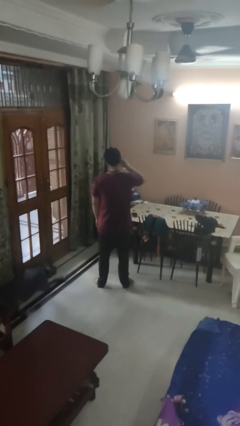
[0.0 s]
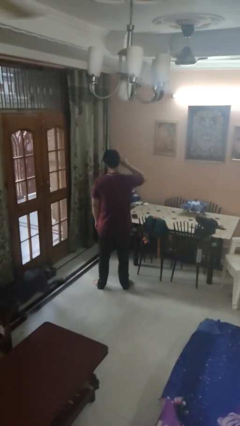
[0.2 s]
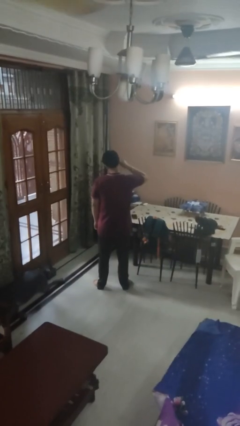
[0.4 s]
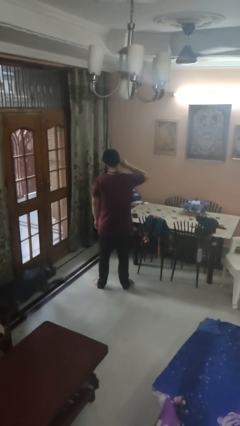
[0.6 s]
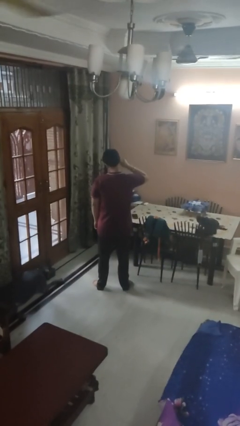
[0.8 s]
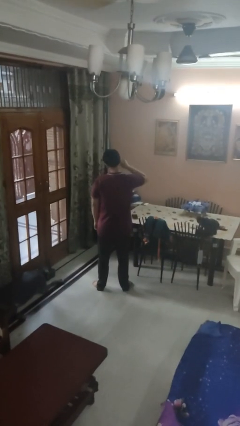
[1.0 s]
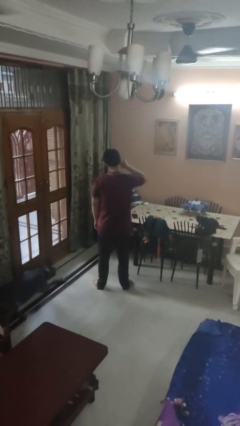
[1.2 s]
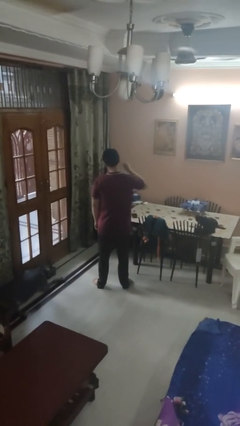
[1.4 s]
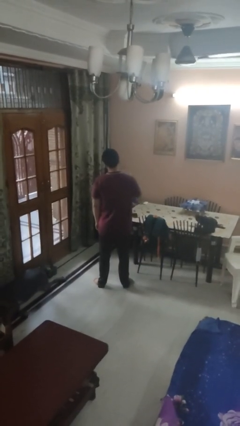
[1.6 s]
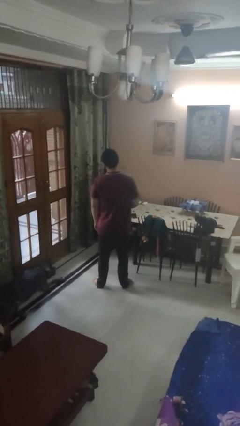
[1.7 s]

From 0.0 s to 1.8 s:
person touches earlobe

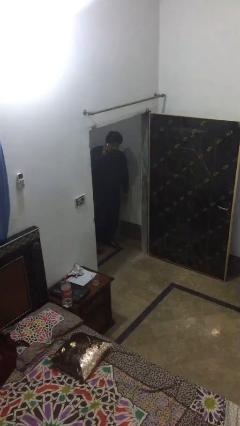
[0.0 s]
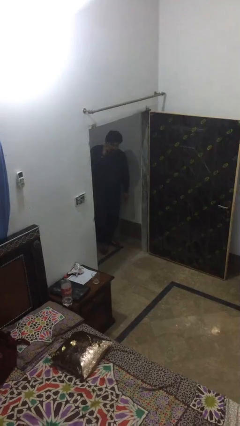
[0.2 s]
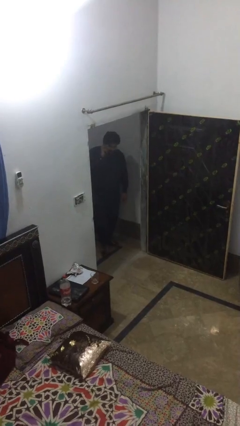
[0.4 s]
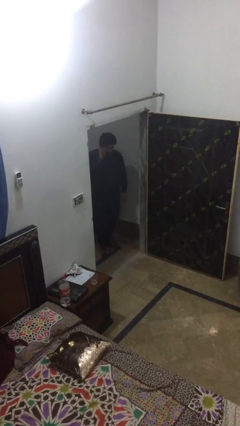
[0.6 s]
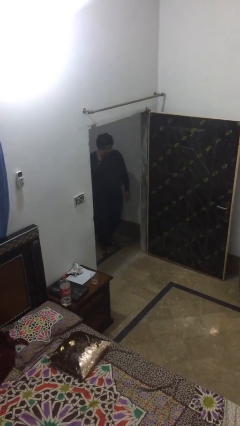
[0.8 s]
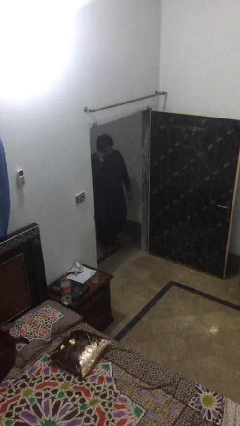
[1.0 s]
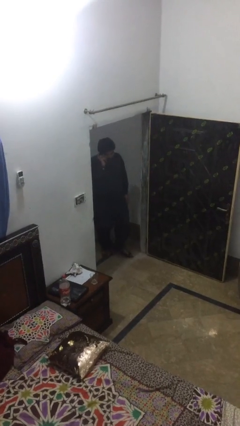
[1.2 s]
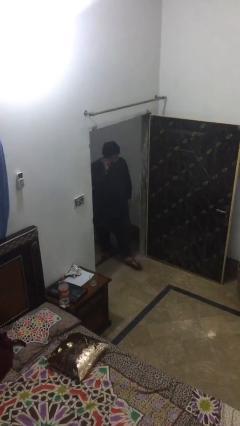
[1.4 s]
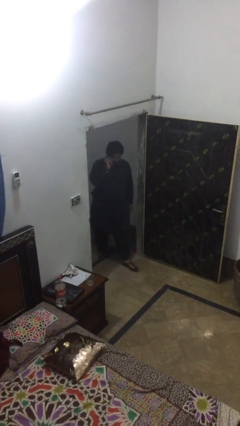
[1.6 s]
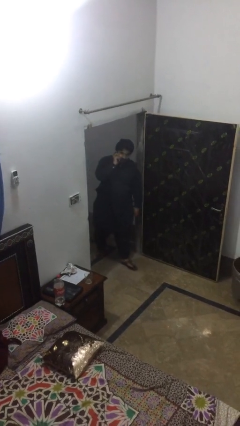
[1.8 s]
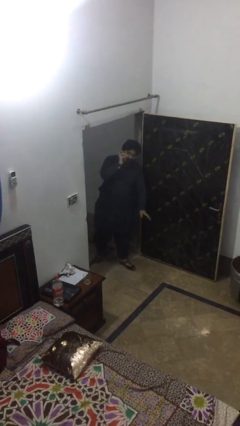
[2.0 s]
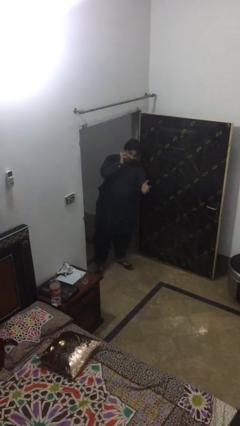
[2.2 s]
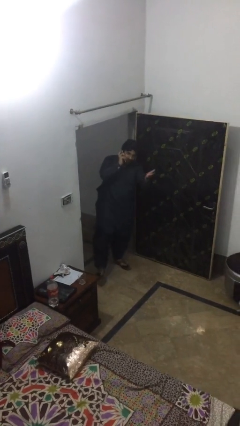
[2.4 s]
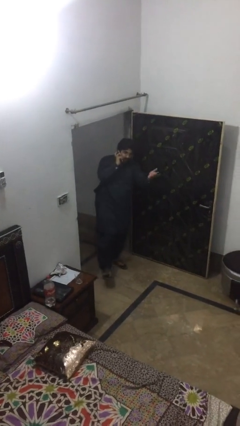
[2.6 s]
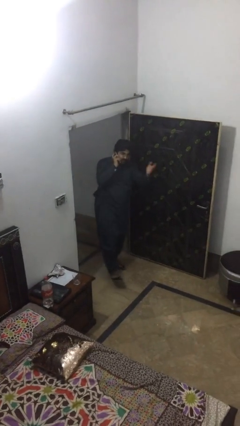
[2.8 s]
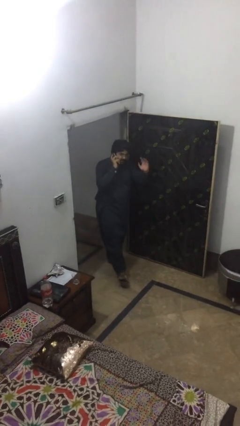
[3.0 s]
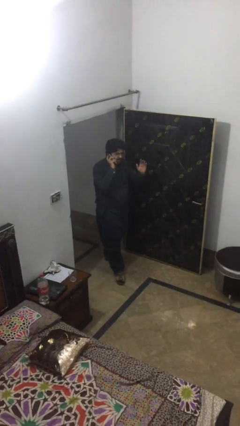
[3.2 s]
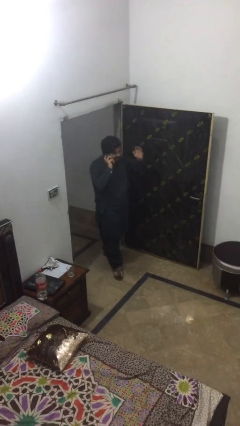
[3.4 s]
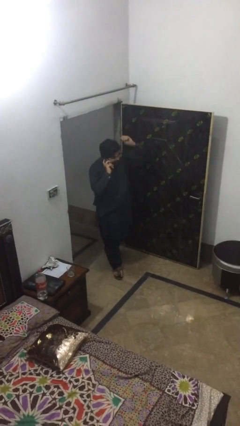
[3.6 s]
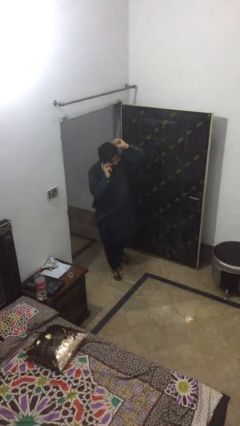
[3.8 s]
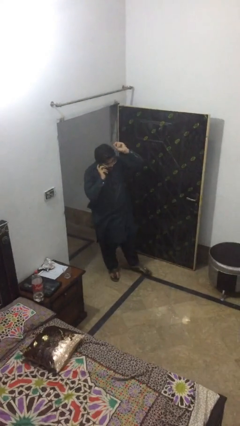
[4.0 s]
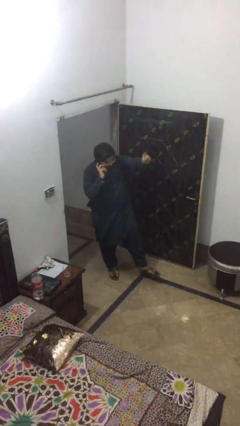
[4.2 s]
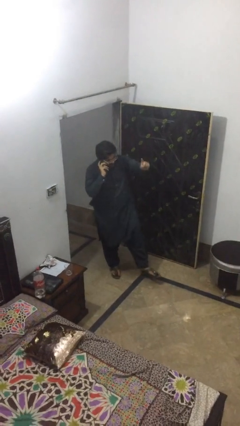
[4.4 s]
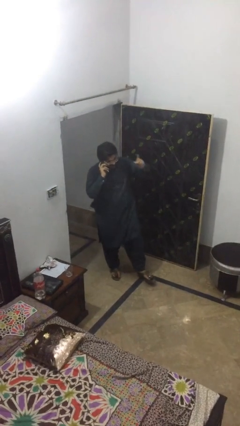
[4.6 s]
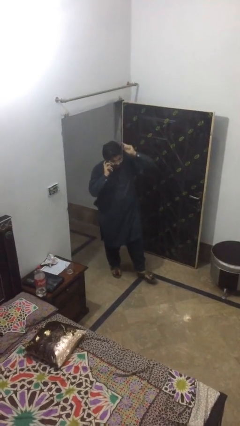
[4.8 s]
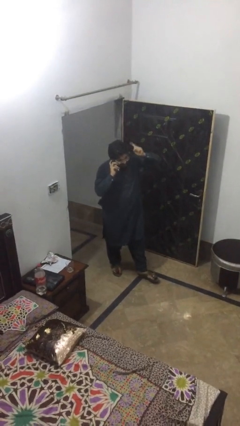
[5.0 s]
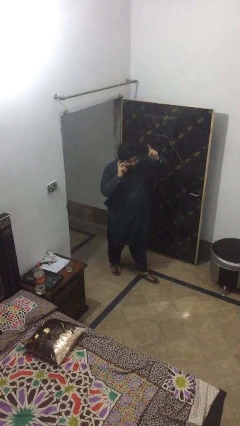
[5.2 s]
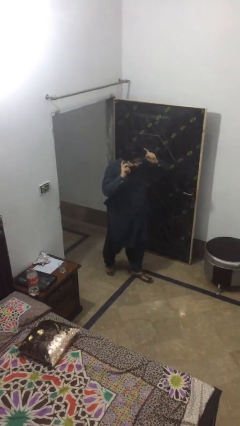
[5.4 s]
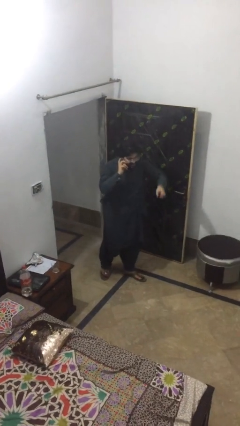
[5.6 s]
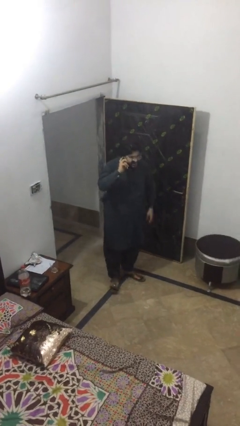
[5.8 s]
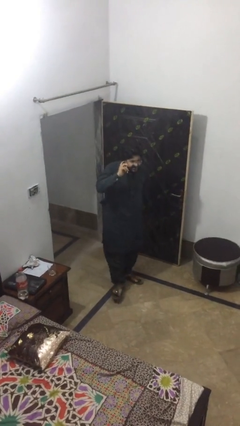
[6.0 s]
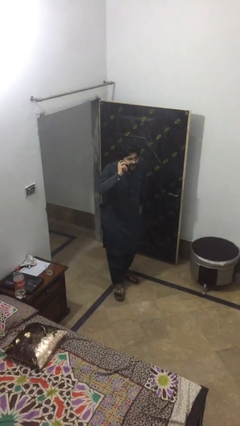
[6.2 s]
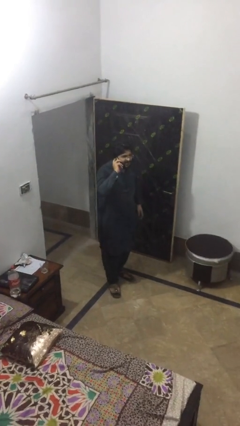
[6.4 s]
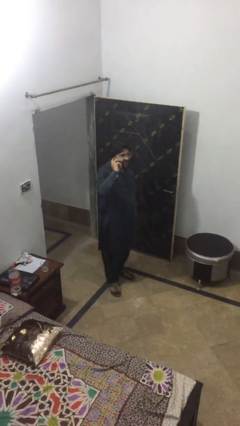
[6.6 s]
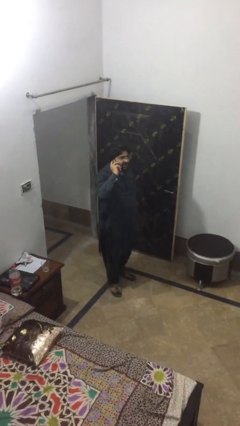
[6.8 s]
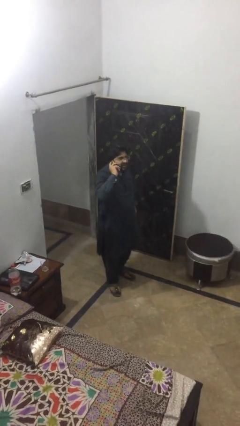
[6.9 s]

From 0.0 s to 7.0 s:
person enters scene through structure

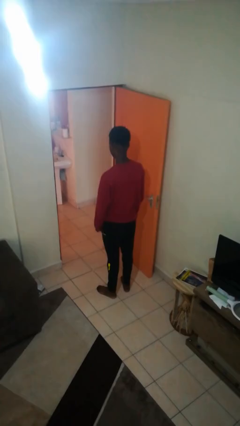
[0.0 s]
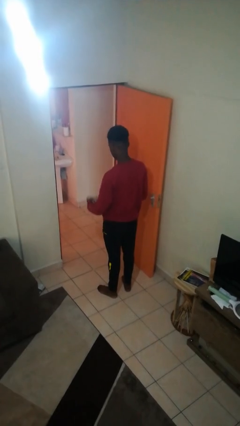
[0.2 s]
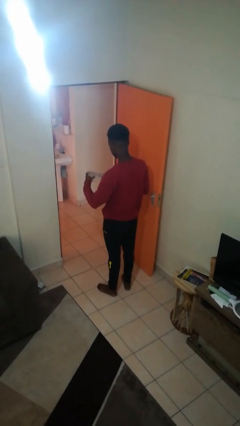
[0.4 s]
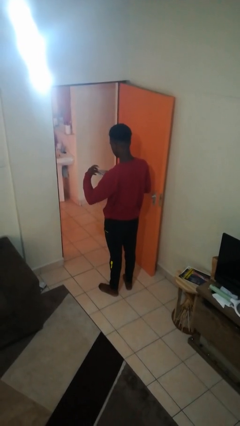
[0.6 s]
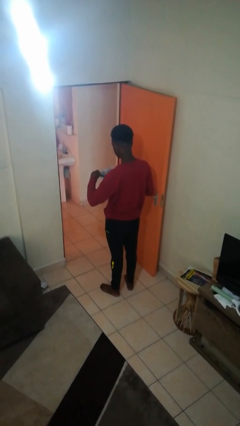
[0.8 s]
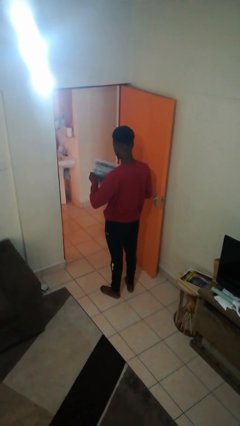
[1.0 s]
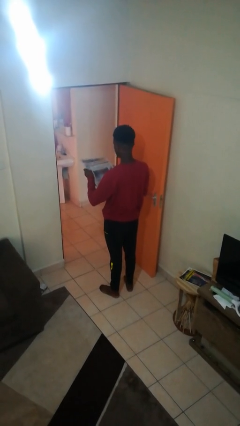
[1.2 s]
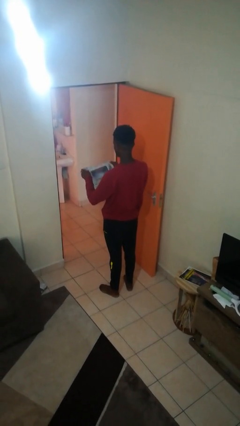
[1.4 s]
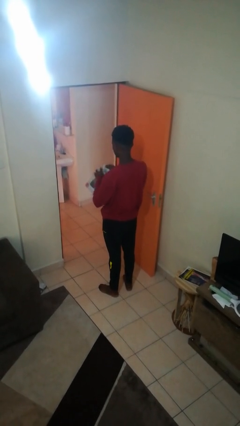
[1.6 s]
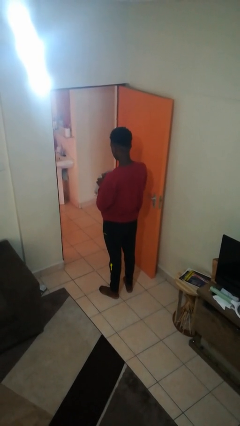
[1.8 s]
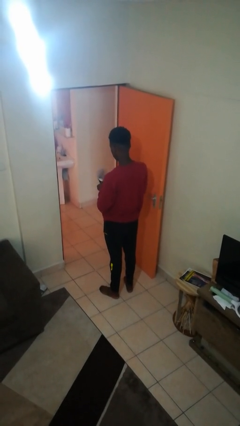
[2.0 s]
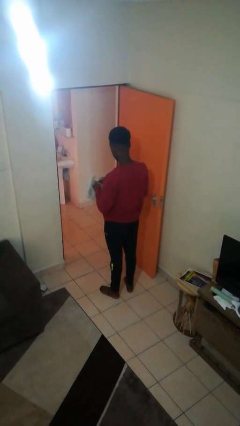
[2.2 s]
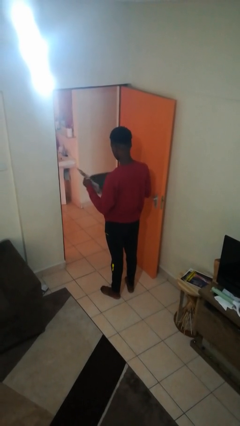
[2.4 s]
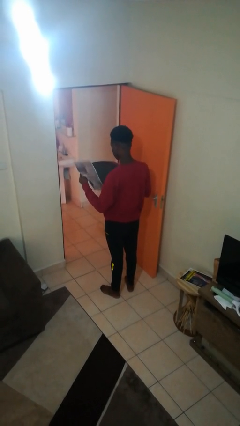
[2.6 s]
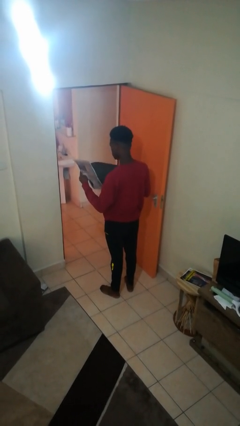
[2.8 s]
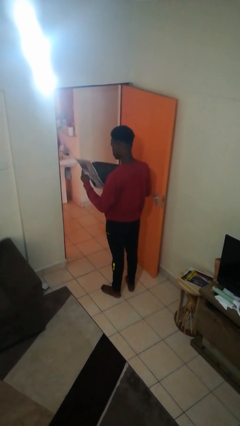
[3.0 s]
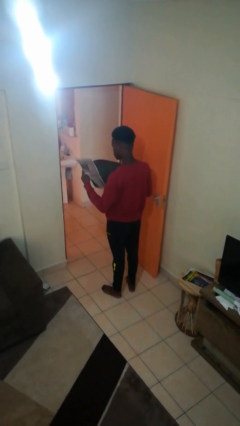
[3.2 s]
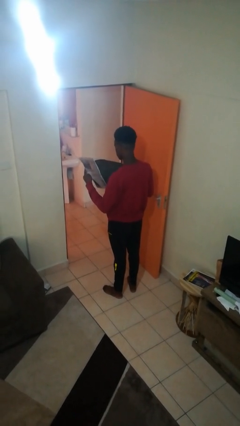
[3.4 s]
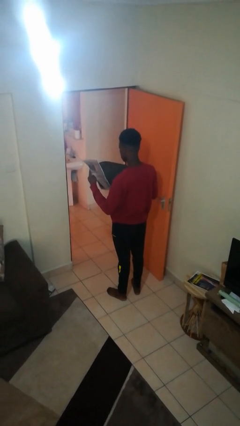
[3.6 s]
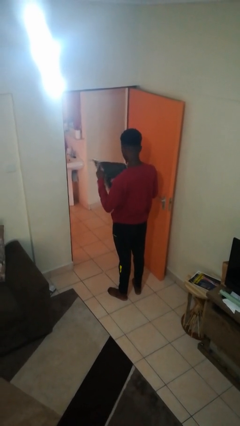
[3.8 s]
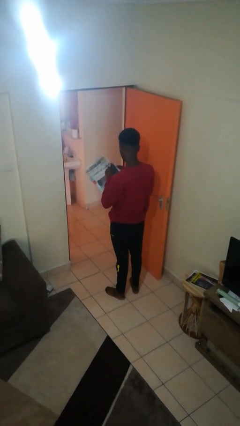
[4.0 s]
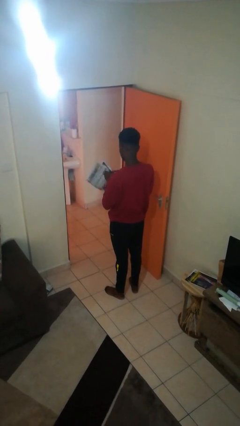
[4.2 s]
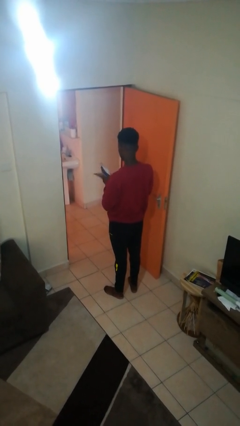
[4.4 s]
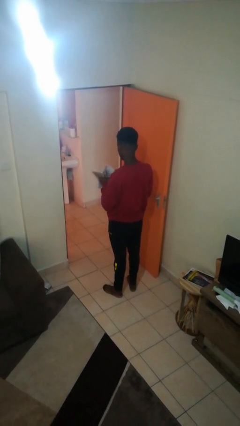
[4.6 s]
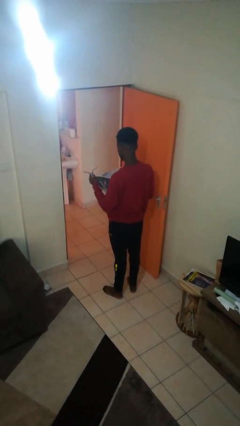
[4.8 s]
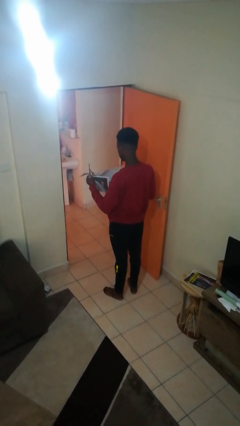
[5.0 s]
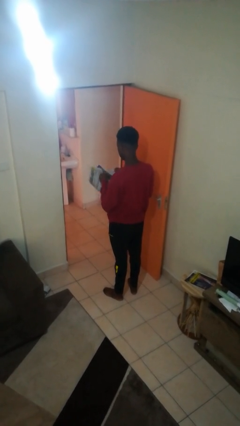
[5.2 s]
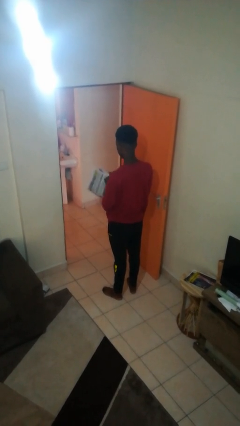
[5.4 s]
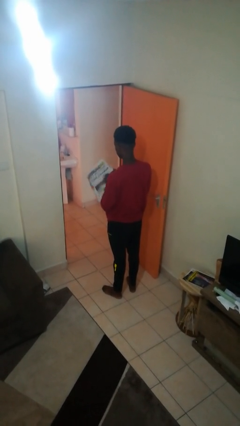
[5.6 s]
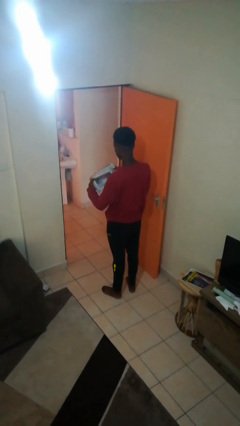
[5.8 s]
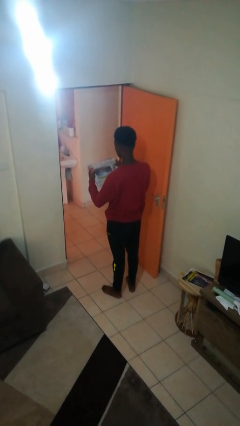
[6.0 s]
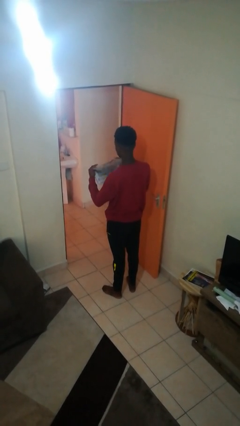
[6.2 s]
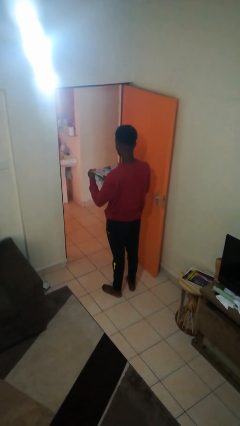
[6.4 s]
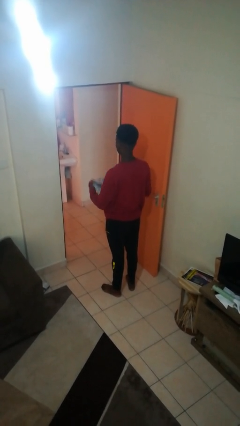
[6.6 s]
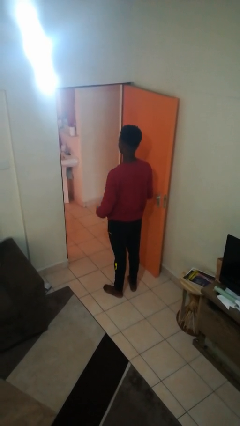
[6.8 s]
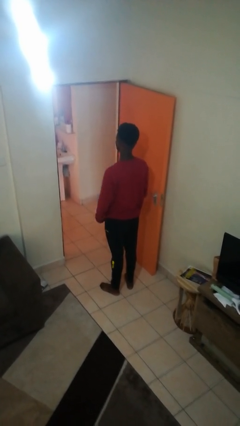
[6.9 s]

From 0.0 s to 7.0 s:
person reads newspaper

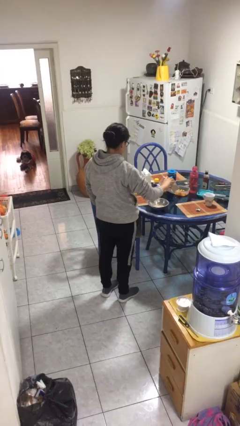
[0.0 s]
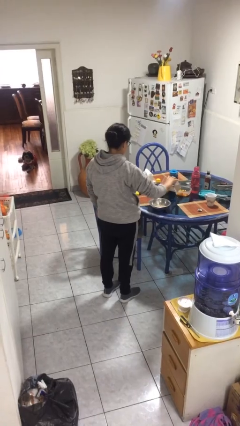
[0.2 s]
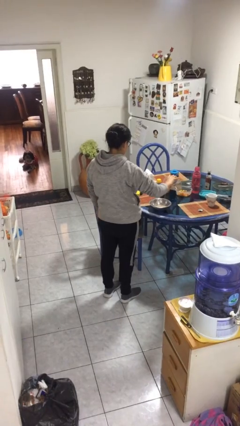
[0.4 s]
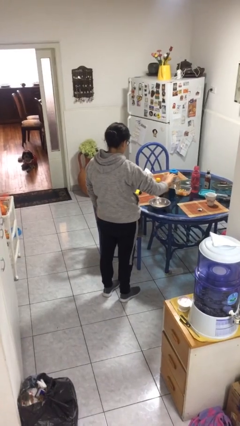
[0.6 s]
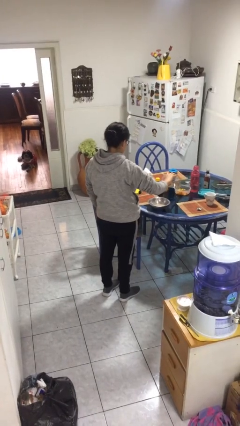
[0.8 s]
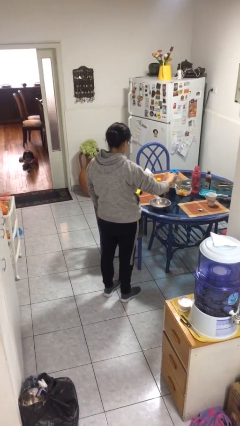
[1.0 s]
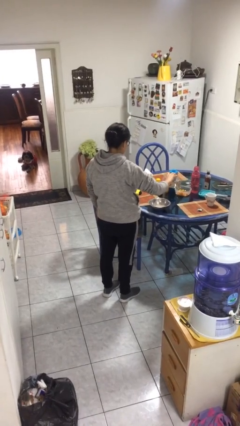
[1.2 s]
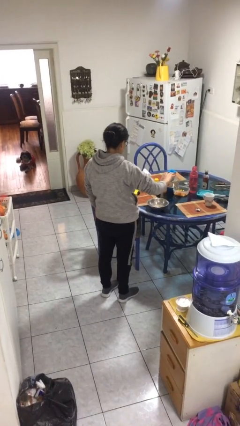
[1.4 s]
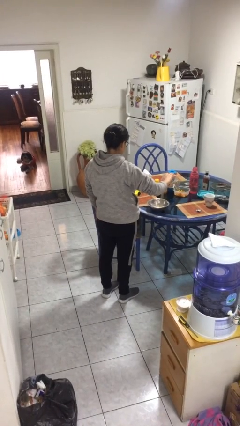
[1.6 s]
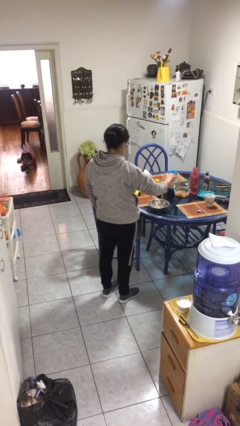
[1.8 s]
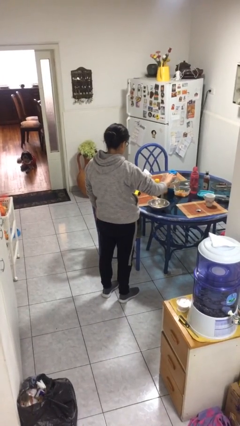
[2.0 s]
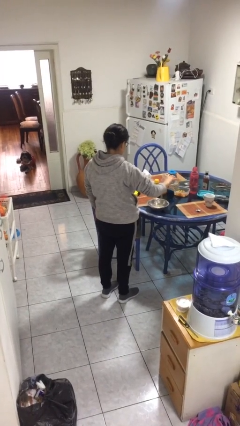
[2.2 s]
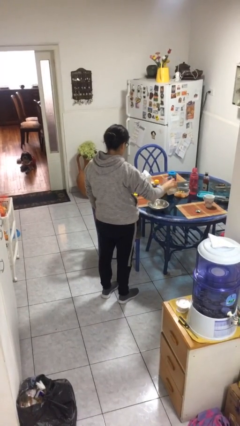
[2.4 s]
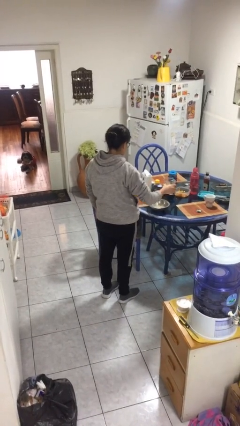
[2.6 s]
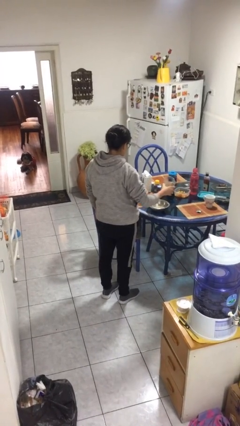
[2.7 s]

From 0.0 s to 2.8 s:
person pours into bowl
